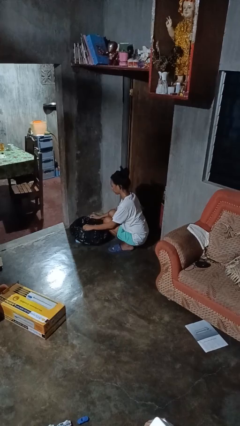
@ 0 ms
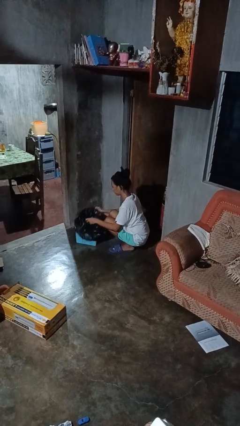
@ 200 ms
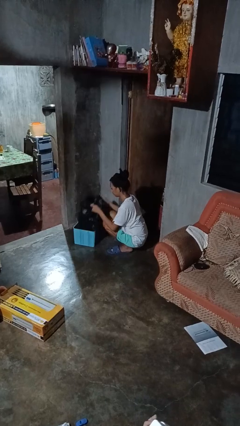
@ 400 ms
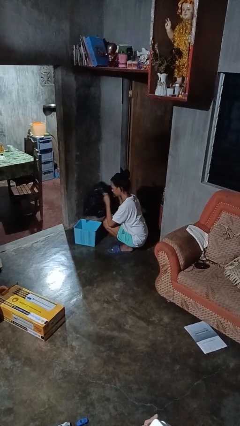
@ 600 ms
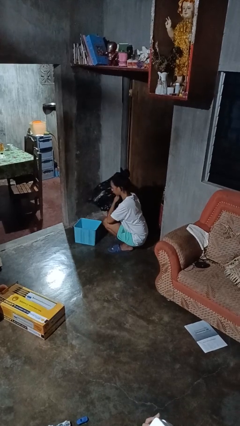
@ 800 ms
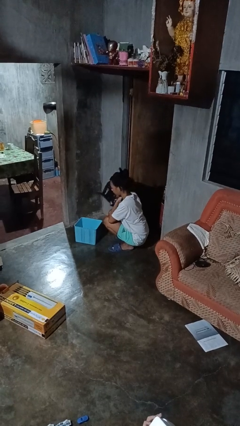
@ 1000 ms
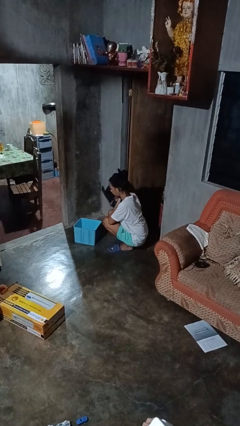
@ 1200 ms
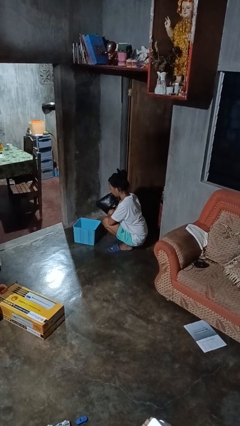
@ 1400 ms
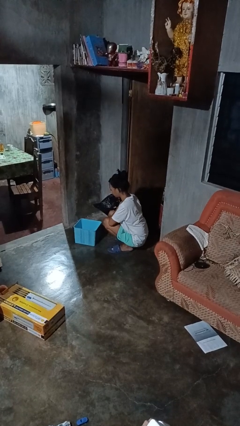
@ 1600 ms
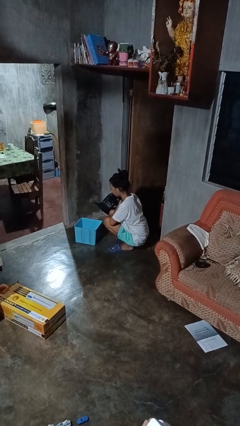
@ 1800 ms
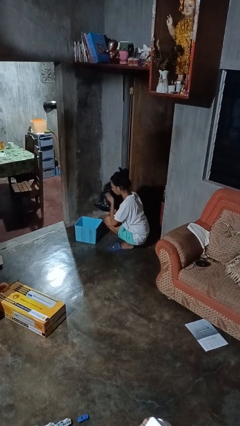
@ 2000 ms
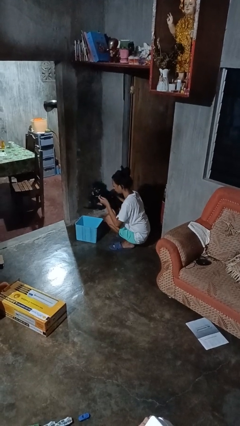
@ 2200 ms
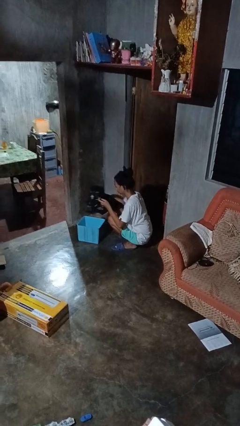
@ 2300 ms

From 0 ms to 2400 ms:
person removes trashbag from trashcan

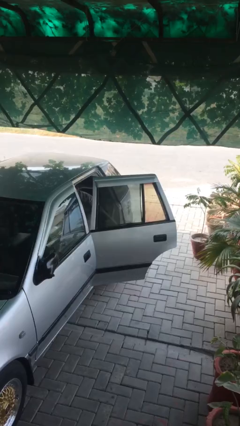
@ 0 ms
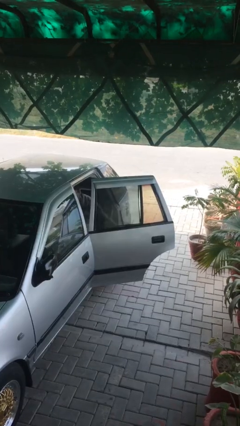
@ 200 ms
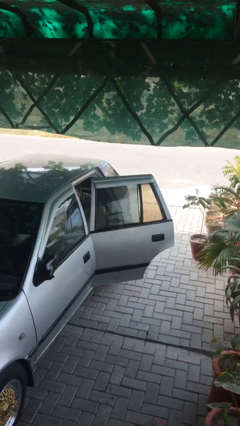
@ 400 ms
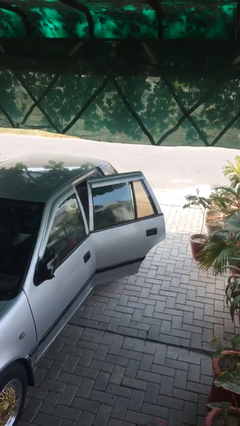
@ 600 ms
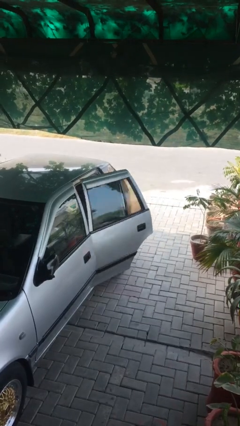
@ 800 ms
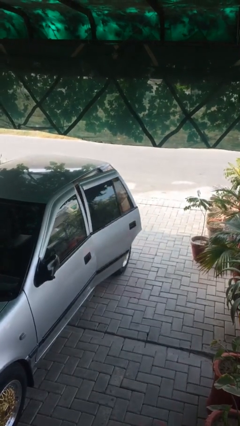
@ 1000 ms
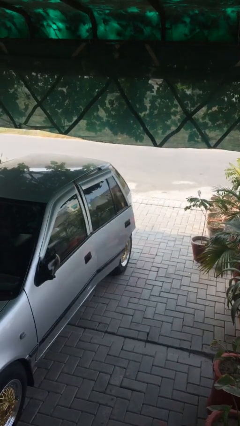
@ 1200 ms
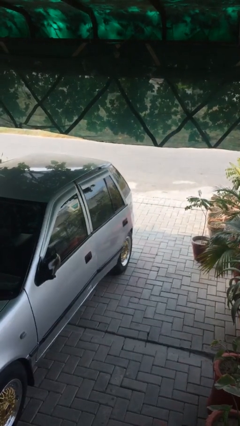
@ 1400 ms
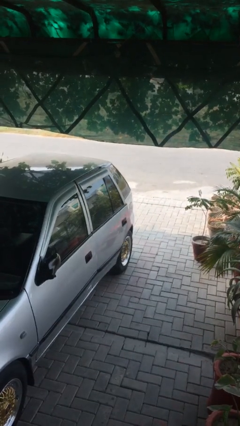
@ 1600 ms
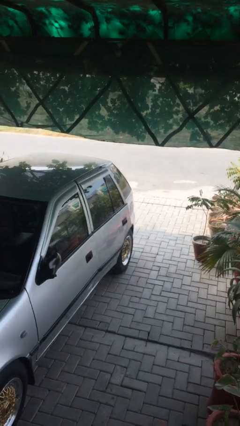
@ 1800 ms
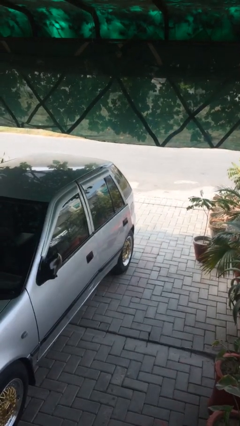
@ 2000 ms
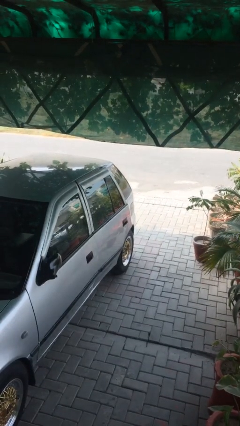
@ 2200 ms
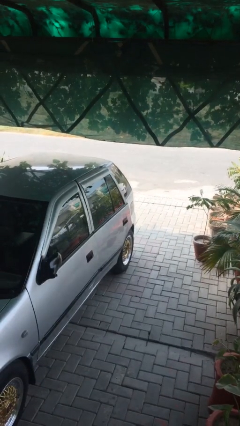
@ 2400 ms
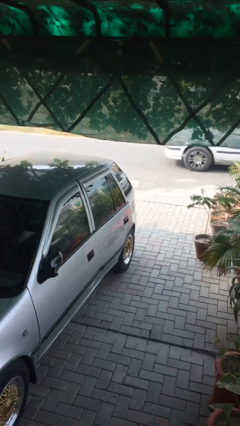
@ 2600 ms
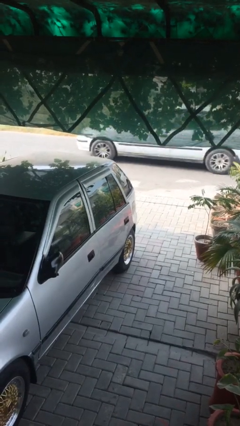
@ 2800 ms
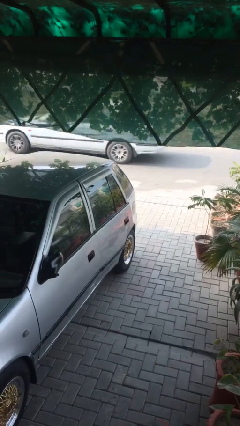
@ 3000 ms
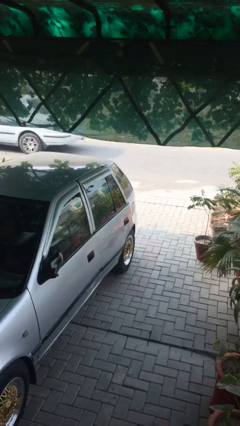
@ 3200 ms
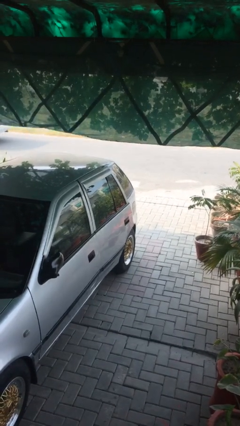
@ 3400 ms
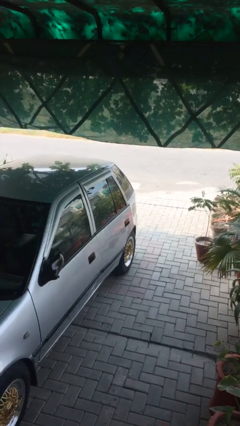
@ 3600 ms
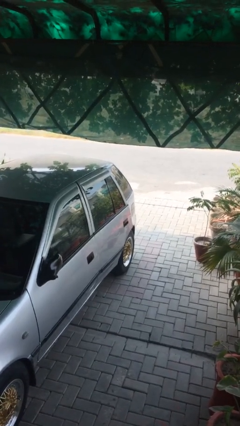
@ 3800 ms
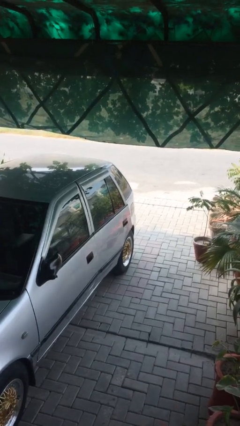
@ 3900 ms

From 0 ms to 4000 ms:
person closes car door

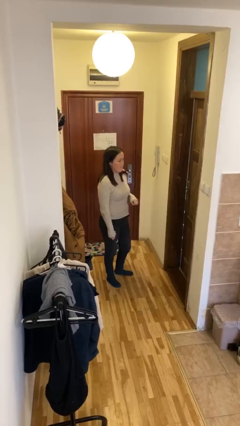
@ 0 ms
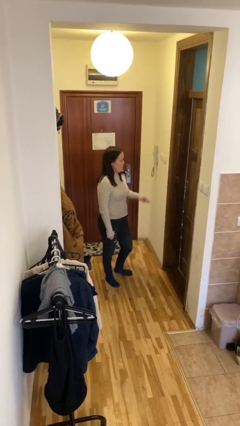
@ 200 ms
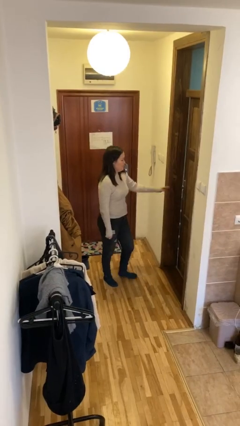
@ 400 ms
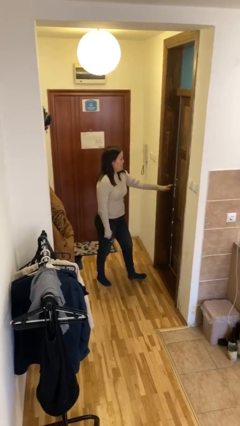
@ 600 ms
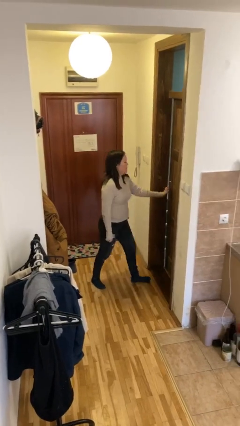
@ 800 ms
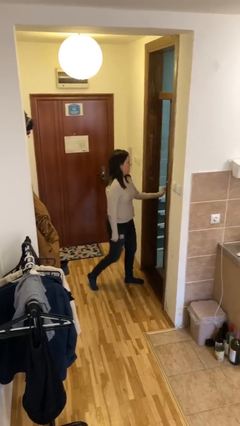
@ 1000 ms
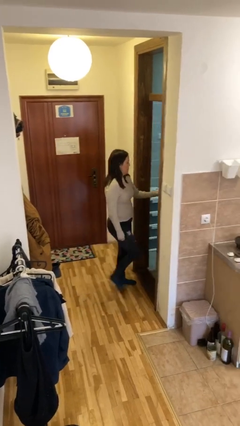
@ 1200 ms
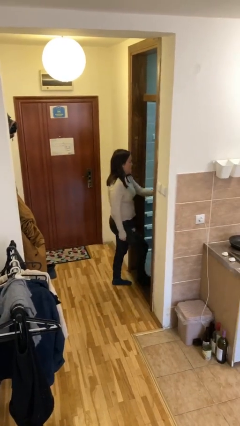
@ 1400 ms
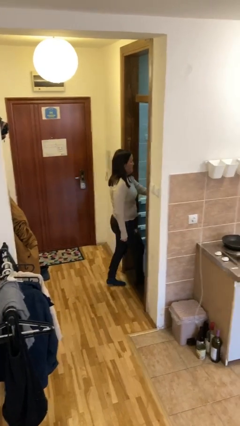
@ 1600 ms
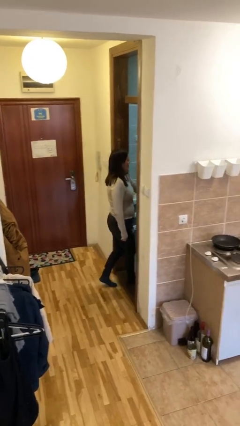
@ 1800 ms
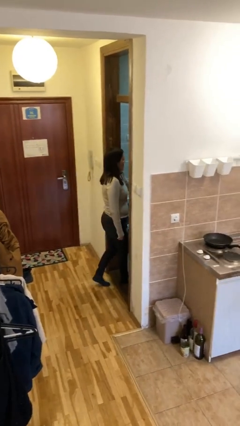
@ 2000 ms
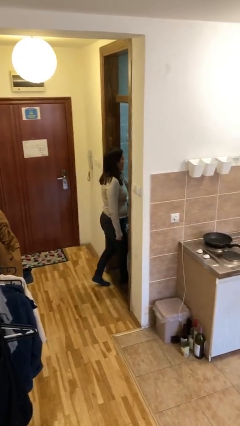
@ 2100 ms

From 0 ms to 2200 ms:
person opens facility door

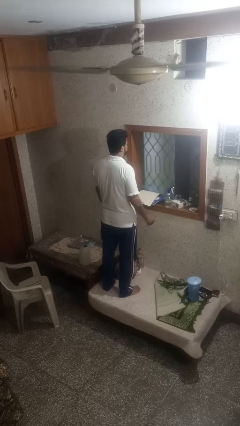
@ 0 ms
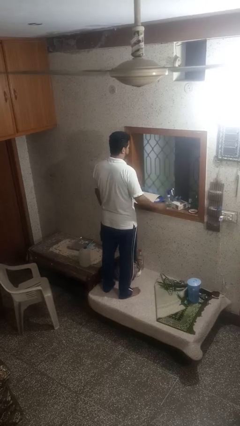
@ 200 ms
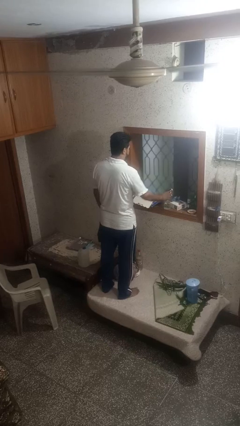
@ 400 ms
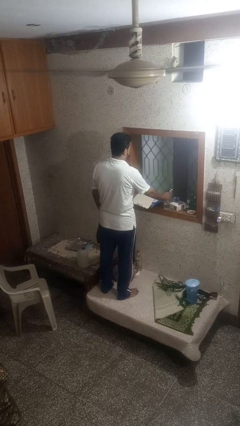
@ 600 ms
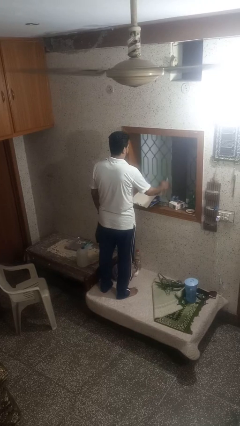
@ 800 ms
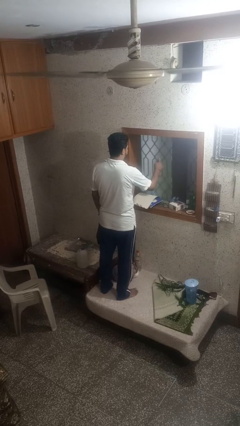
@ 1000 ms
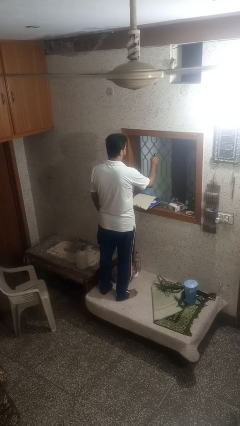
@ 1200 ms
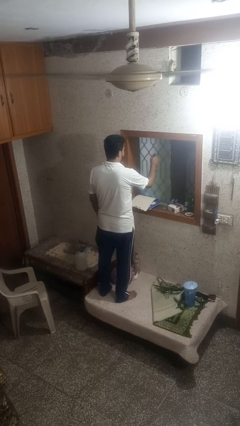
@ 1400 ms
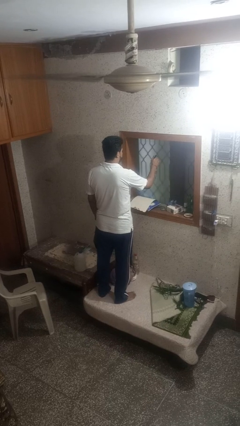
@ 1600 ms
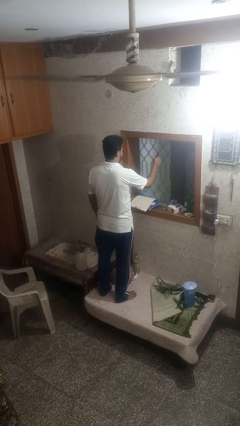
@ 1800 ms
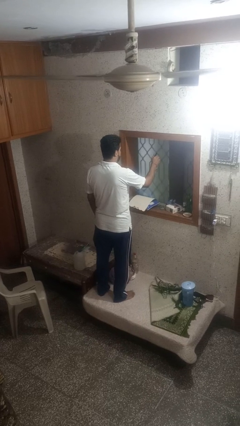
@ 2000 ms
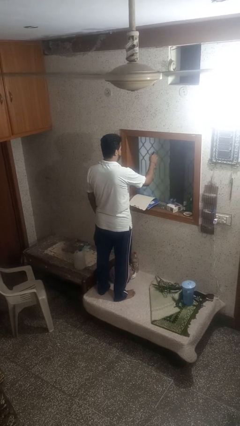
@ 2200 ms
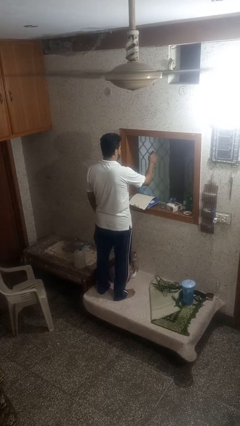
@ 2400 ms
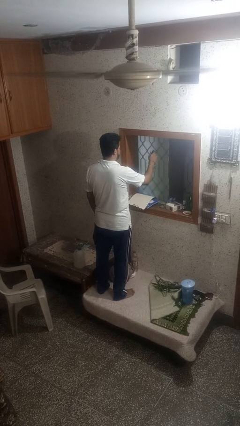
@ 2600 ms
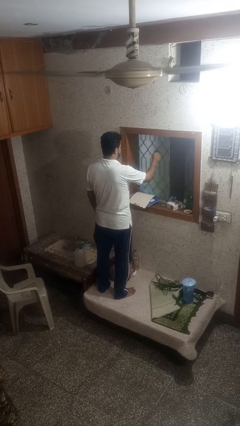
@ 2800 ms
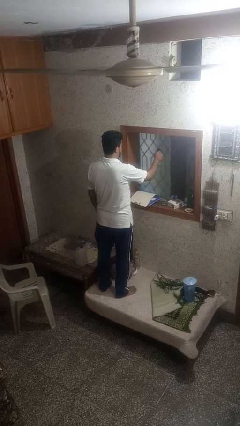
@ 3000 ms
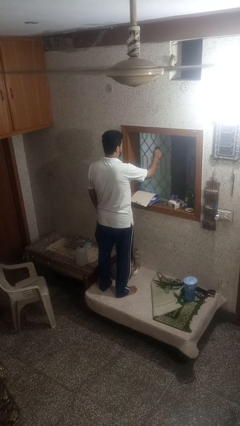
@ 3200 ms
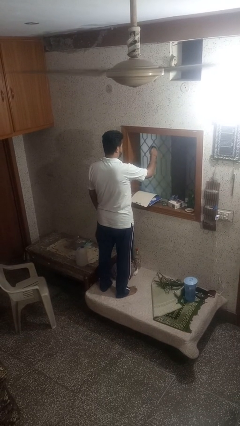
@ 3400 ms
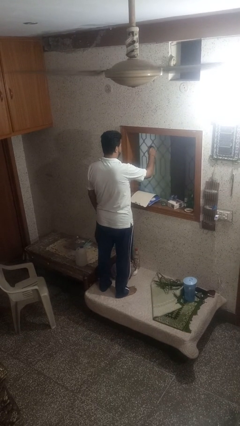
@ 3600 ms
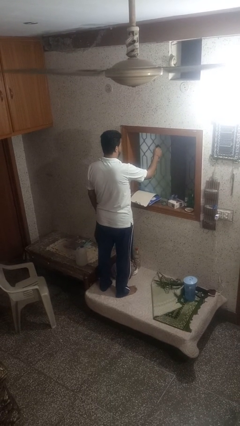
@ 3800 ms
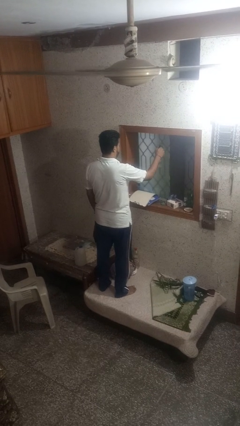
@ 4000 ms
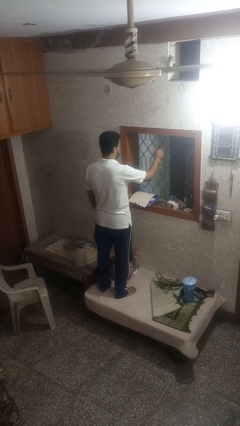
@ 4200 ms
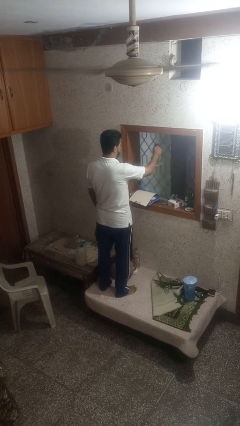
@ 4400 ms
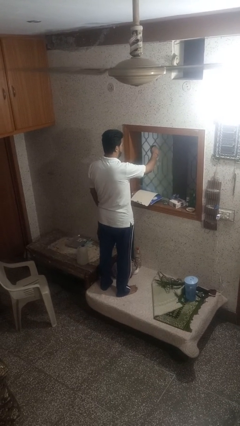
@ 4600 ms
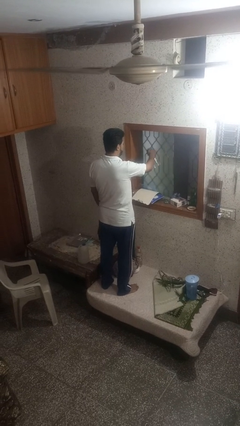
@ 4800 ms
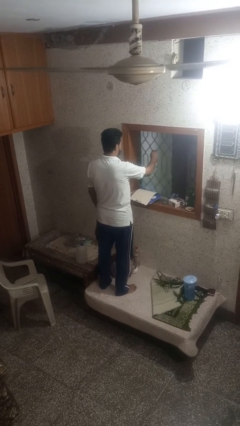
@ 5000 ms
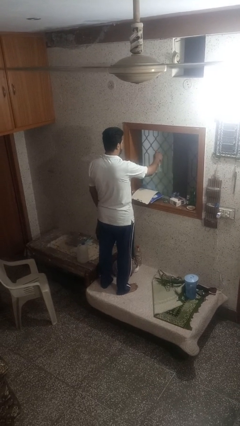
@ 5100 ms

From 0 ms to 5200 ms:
person sprays from bottle

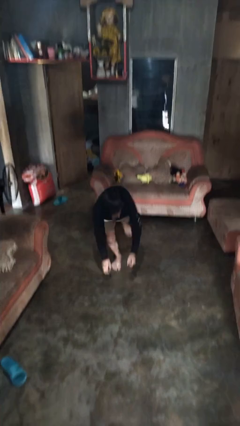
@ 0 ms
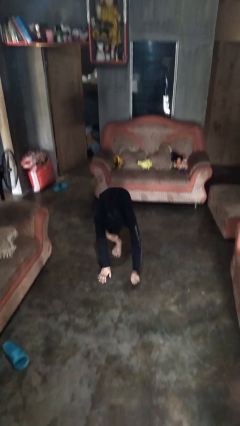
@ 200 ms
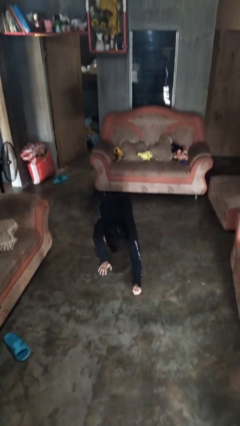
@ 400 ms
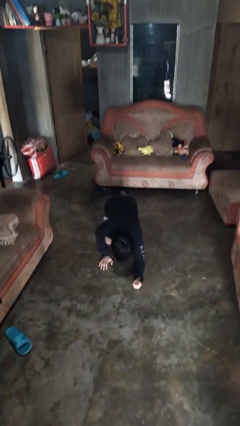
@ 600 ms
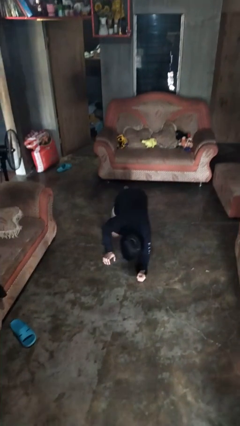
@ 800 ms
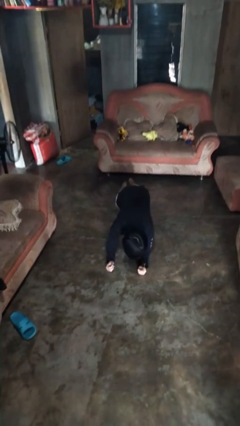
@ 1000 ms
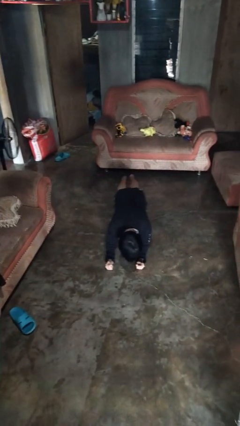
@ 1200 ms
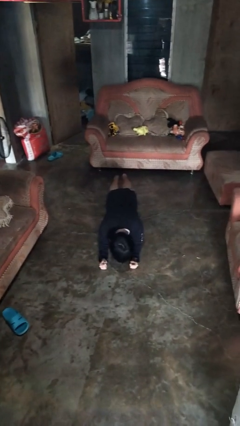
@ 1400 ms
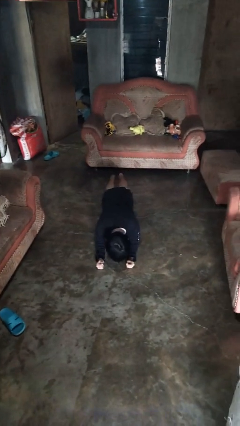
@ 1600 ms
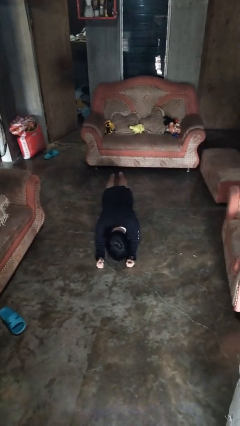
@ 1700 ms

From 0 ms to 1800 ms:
person exercises with plank

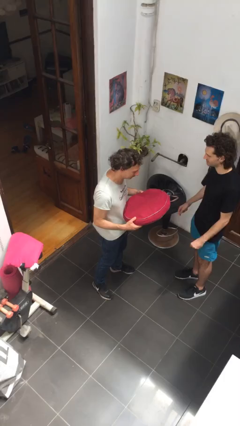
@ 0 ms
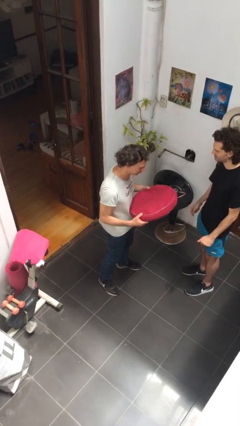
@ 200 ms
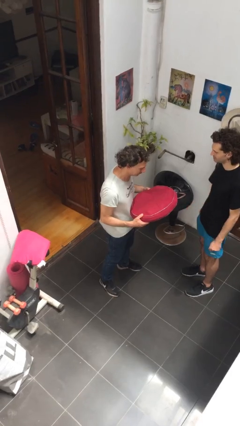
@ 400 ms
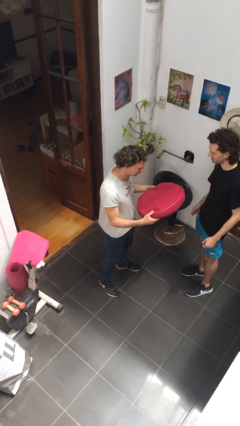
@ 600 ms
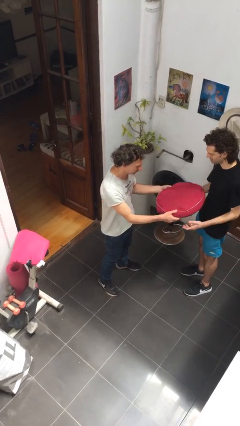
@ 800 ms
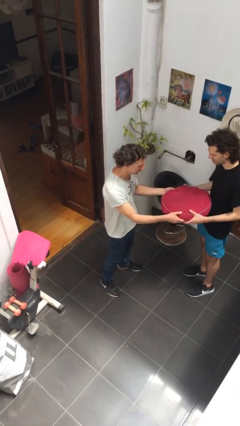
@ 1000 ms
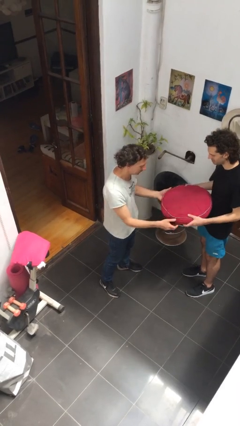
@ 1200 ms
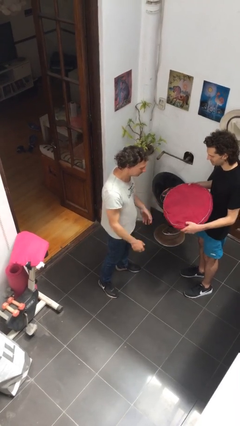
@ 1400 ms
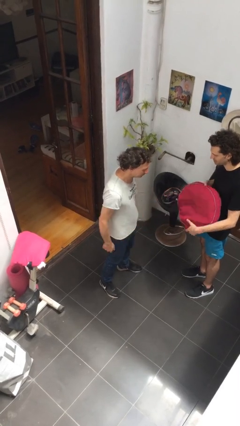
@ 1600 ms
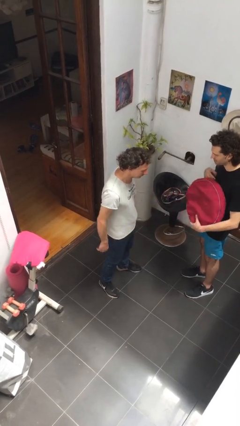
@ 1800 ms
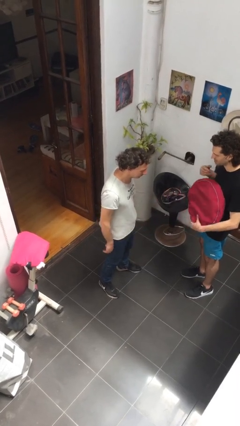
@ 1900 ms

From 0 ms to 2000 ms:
person transfers object to person
